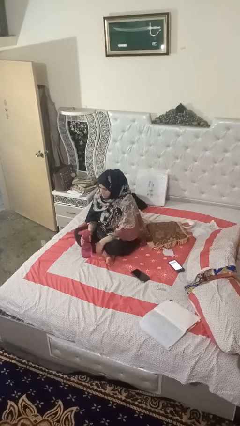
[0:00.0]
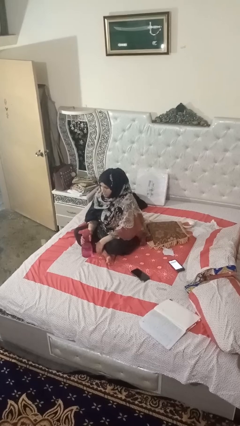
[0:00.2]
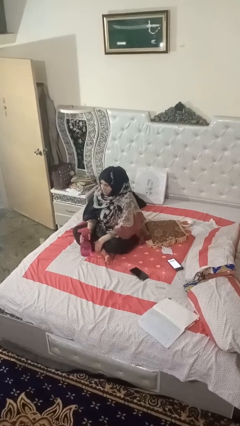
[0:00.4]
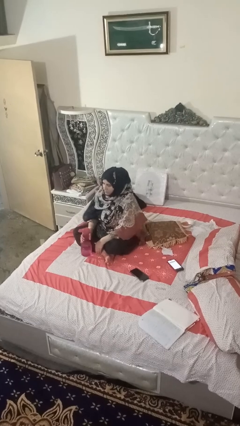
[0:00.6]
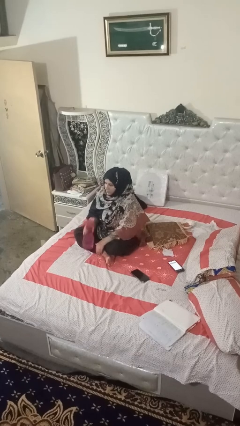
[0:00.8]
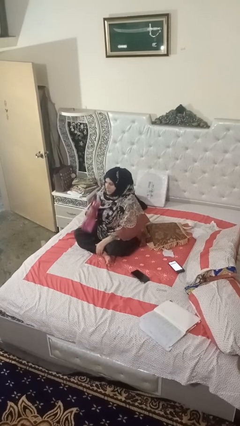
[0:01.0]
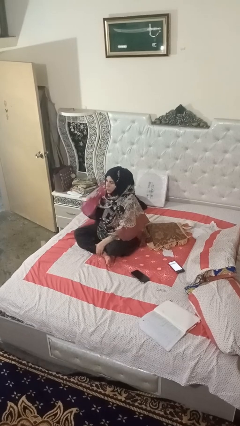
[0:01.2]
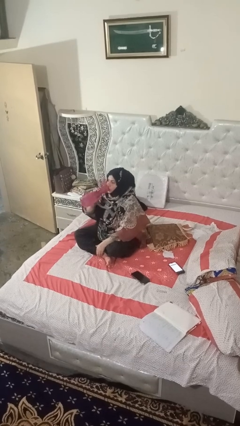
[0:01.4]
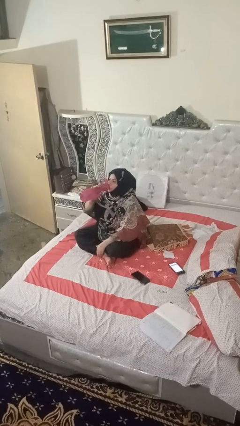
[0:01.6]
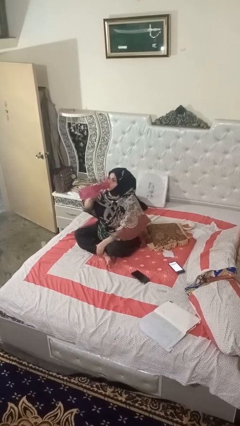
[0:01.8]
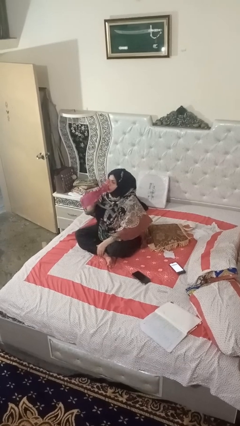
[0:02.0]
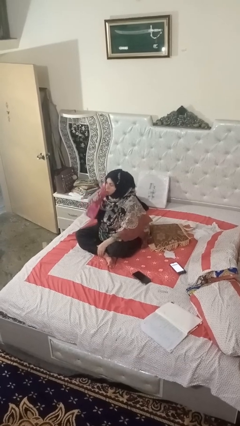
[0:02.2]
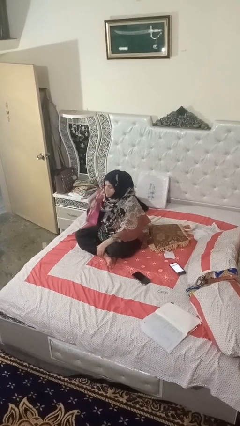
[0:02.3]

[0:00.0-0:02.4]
person drinks from bottle

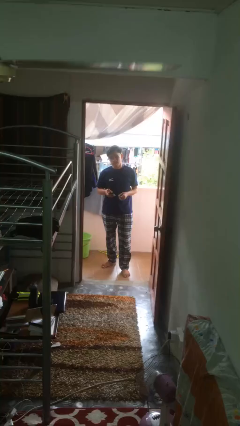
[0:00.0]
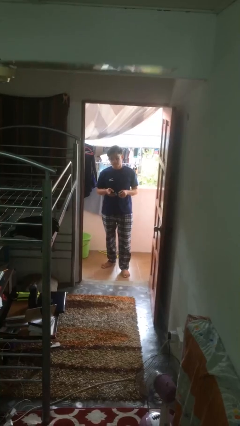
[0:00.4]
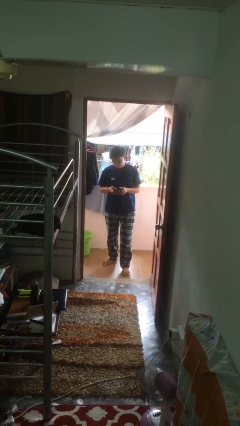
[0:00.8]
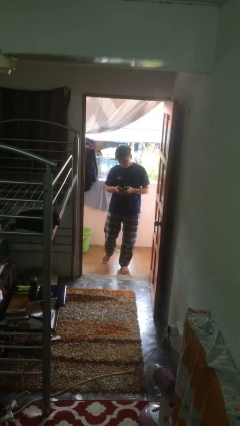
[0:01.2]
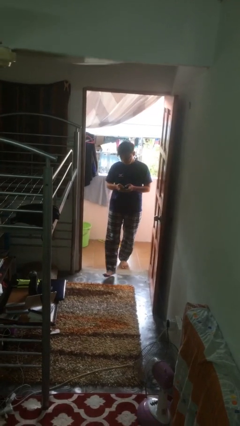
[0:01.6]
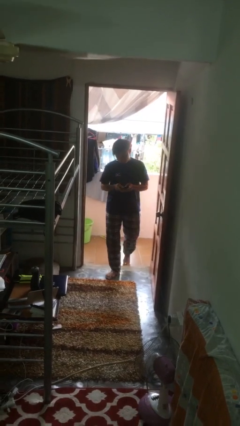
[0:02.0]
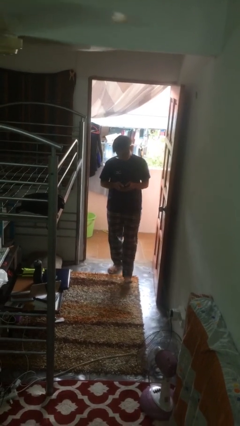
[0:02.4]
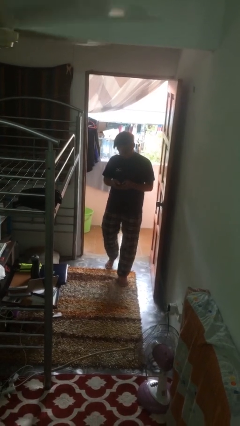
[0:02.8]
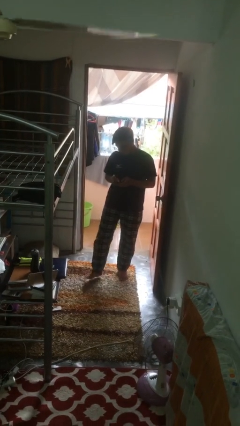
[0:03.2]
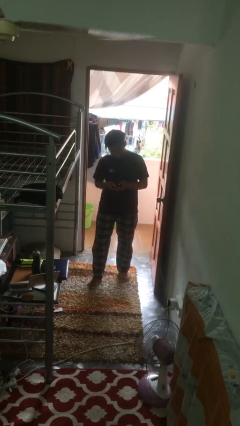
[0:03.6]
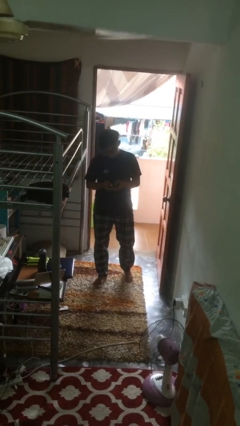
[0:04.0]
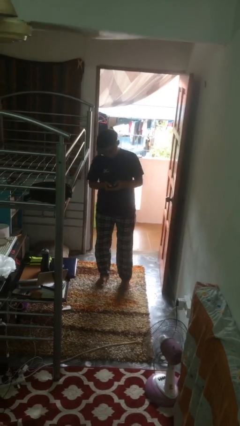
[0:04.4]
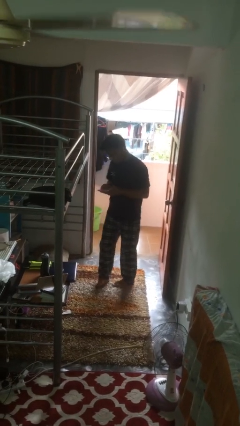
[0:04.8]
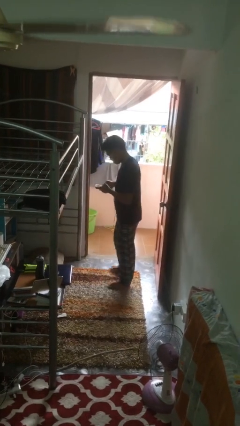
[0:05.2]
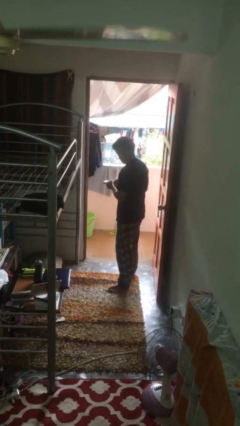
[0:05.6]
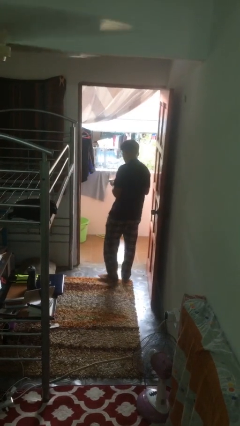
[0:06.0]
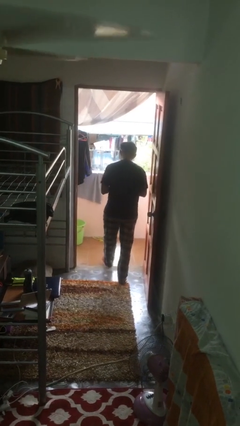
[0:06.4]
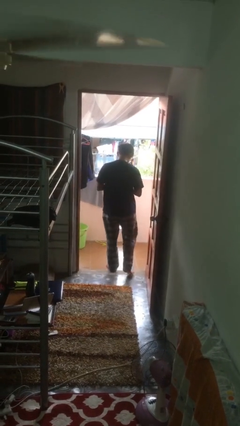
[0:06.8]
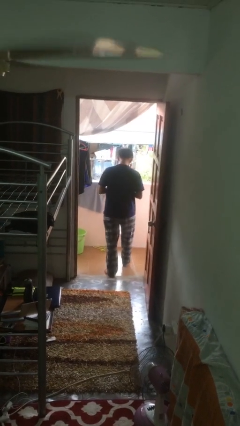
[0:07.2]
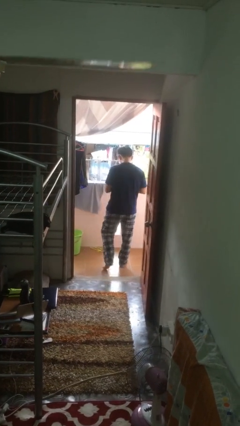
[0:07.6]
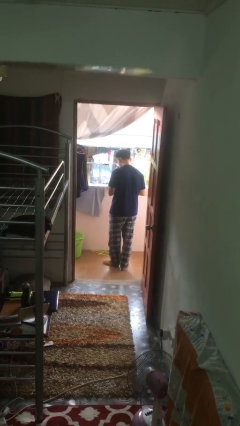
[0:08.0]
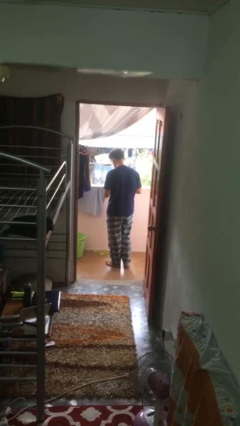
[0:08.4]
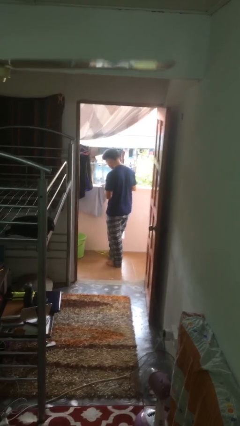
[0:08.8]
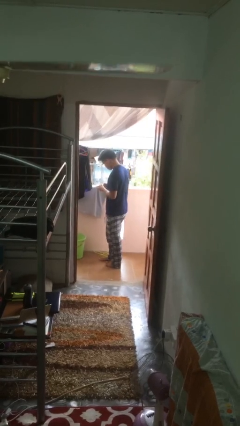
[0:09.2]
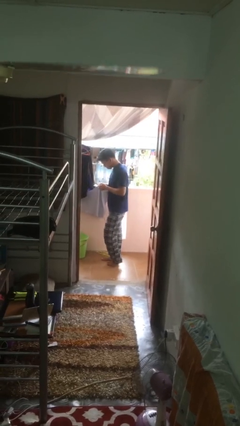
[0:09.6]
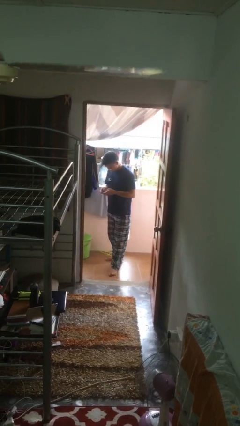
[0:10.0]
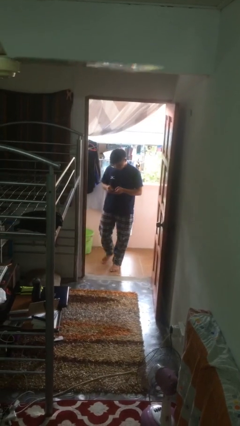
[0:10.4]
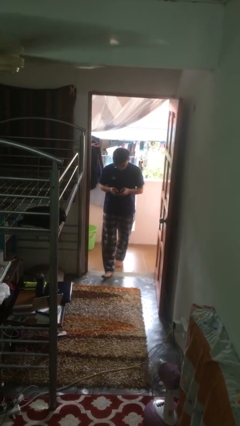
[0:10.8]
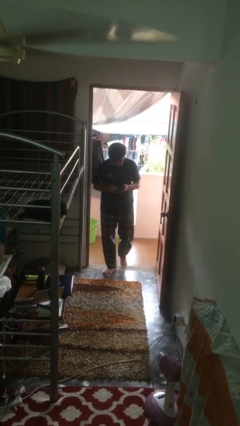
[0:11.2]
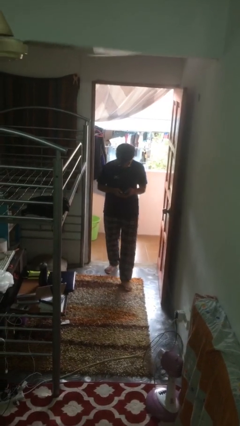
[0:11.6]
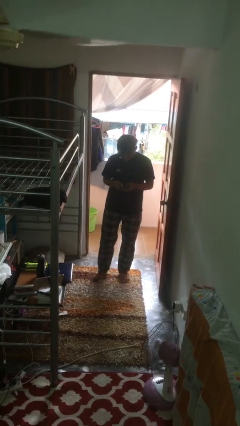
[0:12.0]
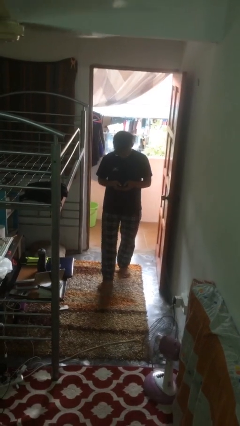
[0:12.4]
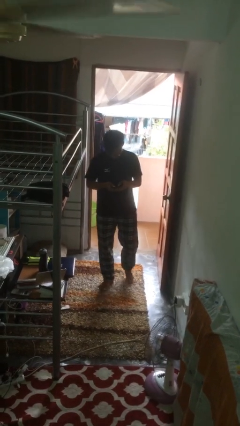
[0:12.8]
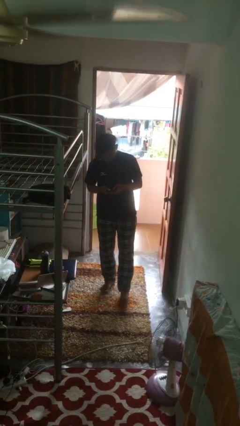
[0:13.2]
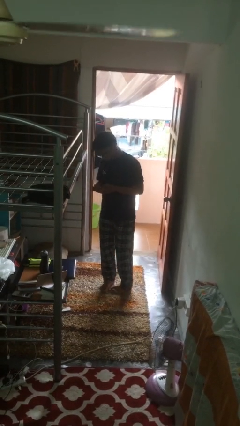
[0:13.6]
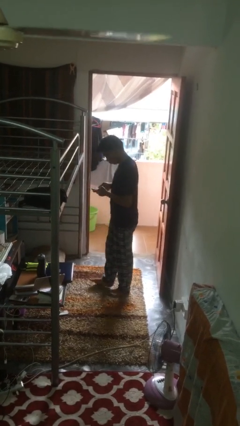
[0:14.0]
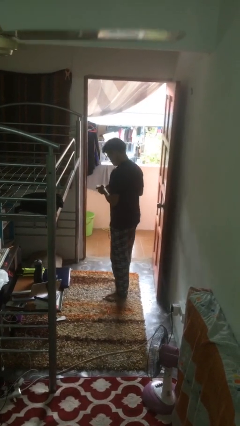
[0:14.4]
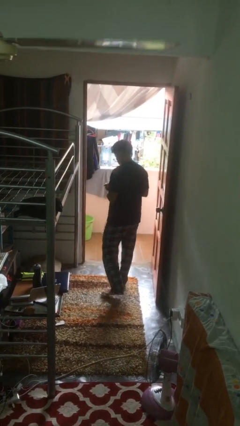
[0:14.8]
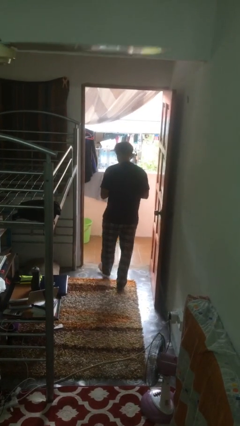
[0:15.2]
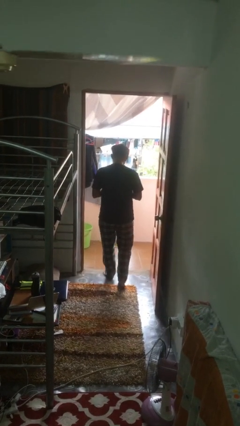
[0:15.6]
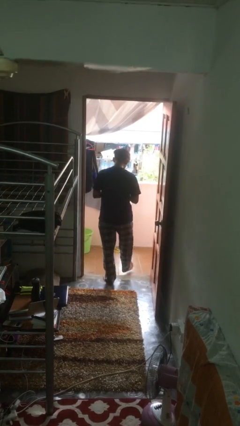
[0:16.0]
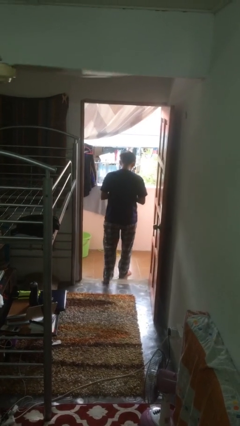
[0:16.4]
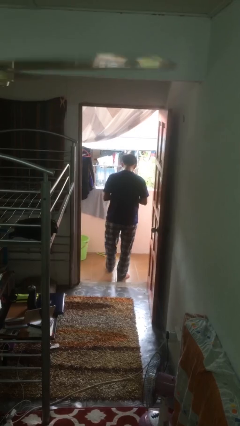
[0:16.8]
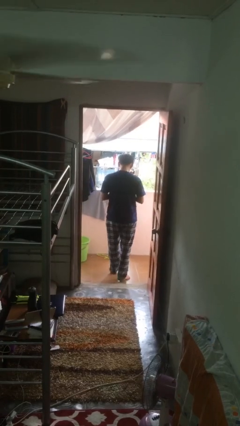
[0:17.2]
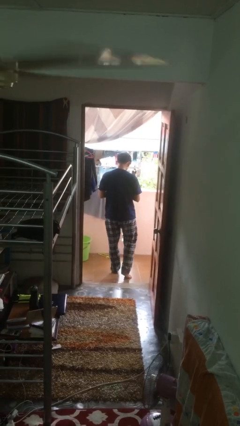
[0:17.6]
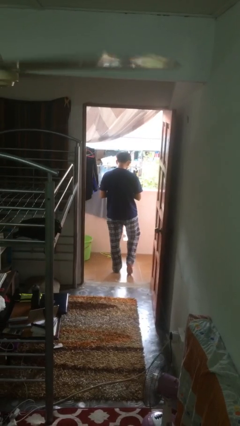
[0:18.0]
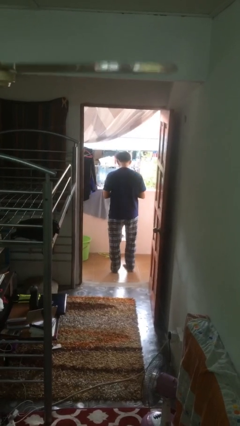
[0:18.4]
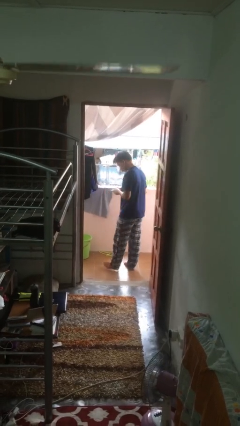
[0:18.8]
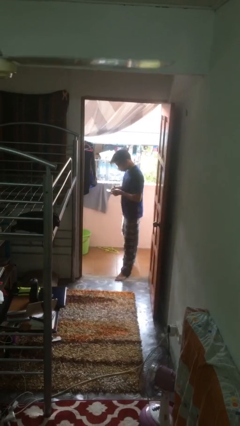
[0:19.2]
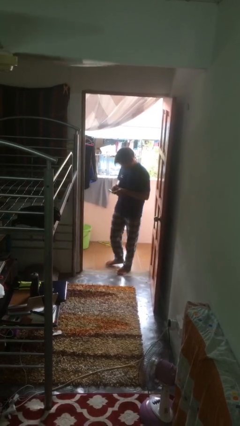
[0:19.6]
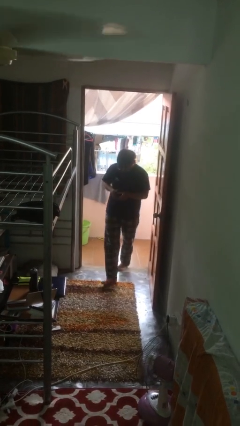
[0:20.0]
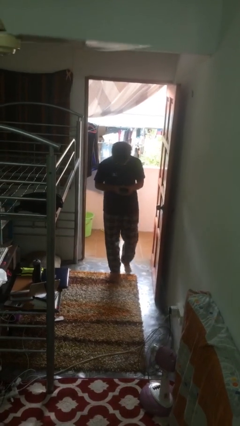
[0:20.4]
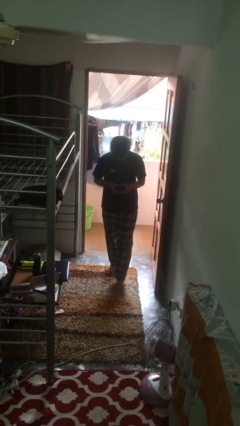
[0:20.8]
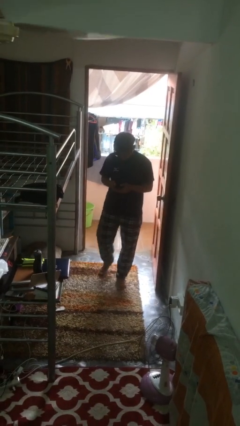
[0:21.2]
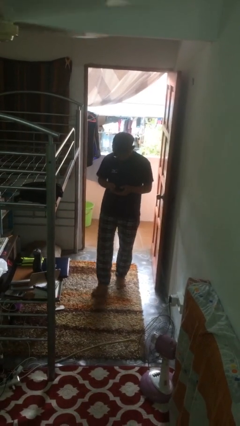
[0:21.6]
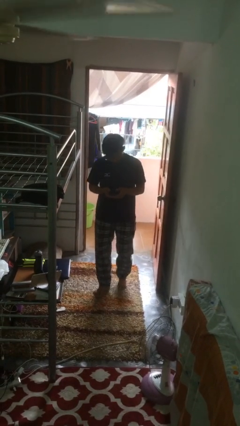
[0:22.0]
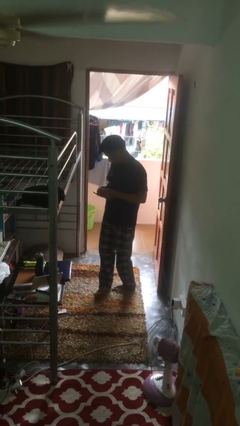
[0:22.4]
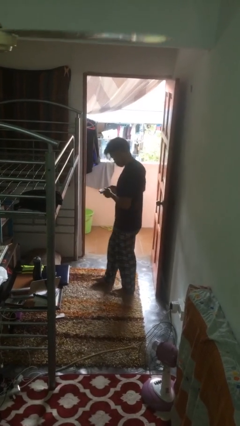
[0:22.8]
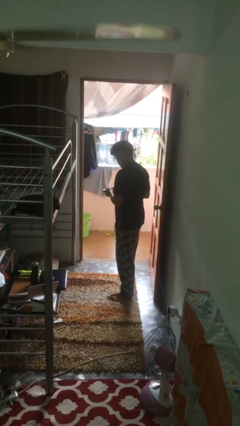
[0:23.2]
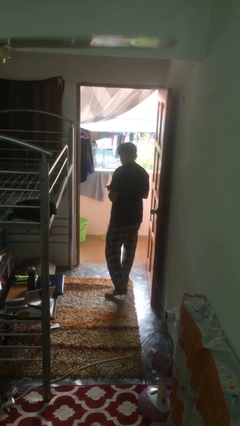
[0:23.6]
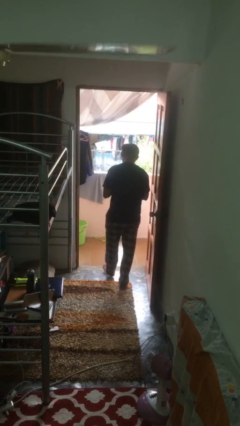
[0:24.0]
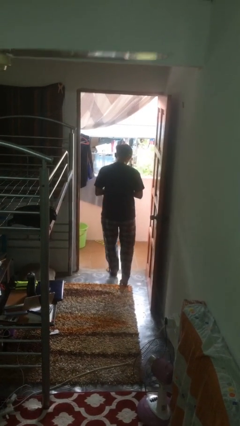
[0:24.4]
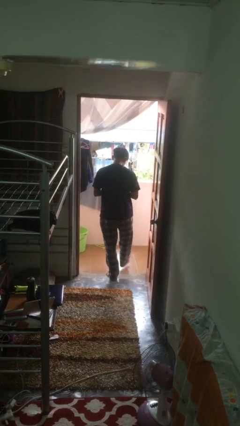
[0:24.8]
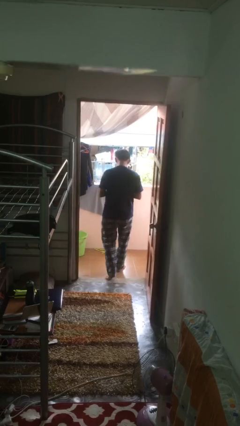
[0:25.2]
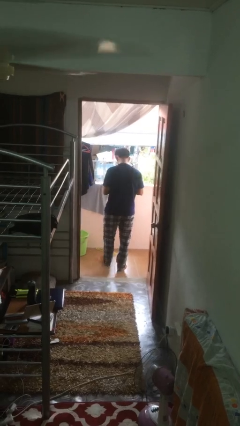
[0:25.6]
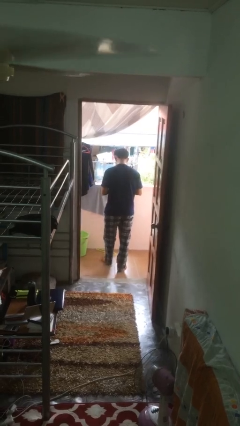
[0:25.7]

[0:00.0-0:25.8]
person texts on phone

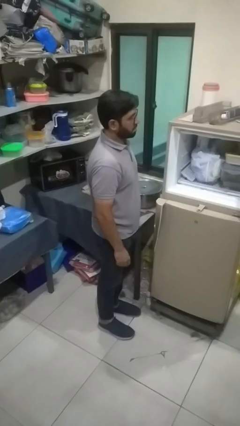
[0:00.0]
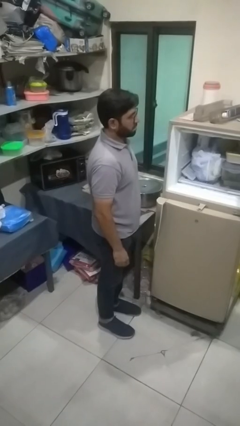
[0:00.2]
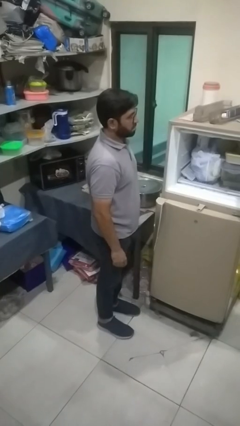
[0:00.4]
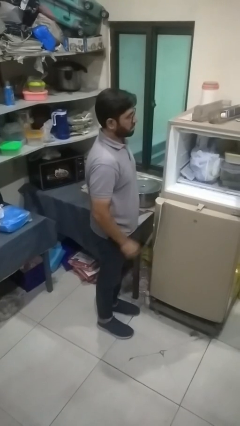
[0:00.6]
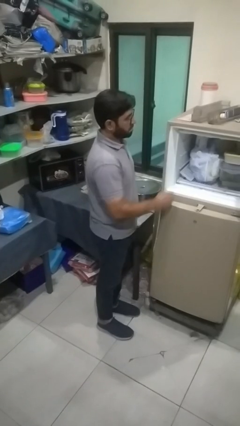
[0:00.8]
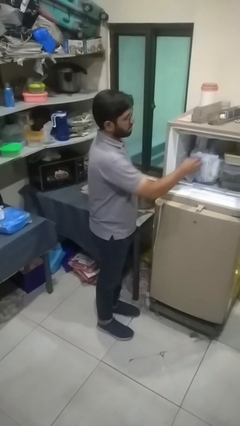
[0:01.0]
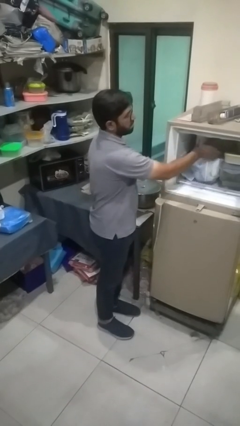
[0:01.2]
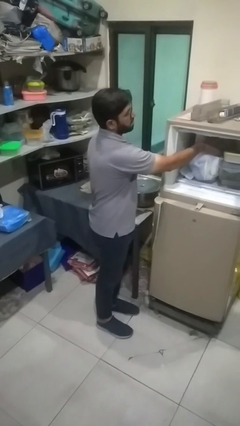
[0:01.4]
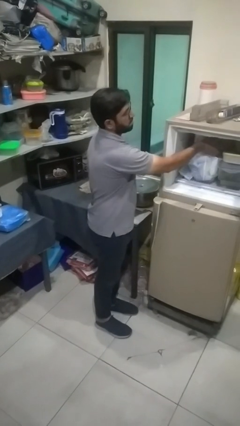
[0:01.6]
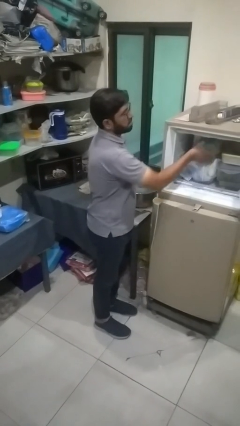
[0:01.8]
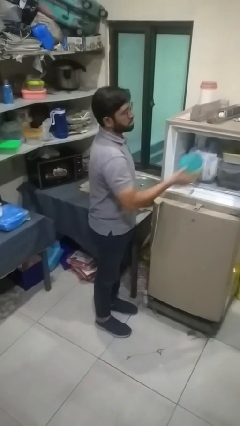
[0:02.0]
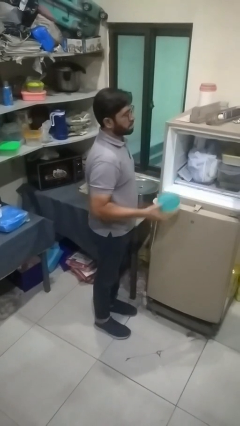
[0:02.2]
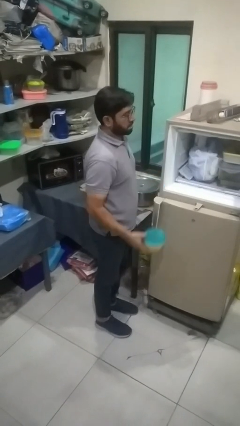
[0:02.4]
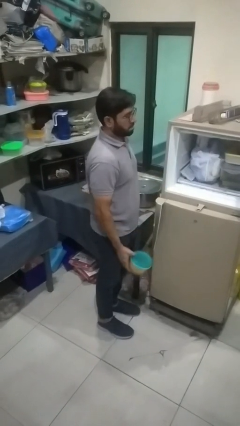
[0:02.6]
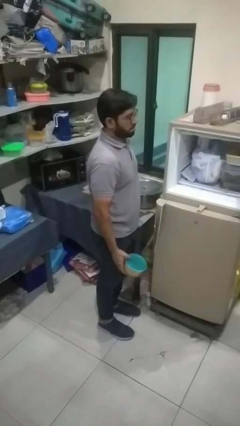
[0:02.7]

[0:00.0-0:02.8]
person takes object from refrigerator
